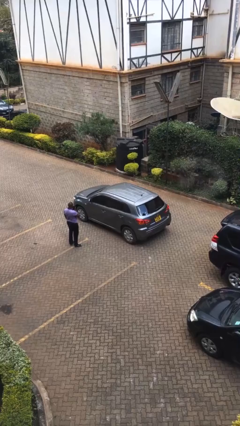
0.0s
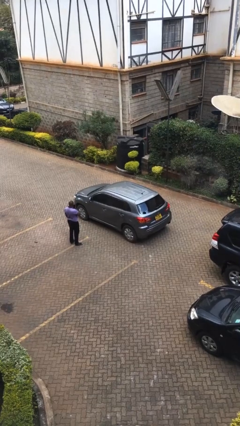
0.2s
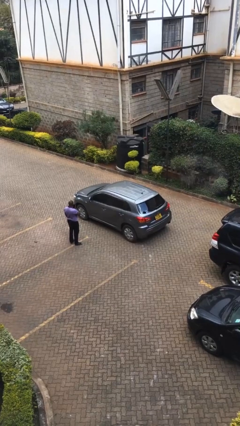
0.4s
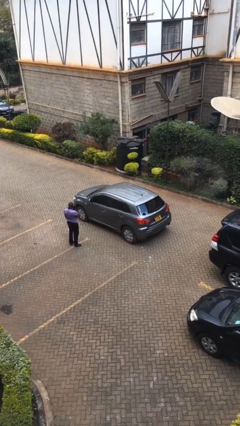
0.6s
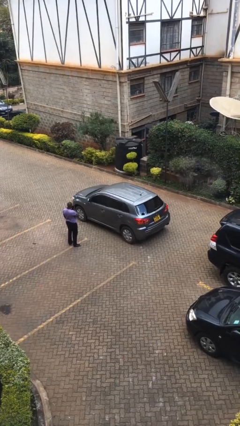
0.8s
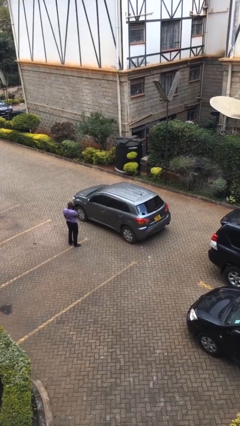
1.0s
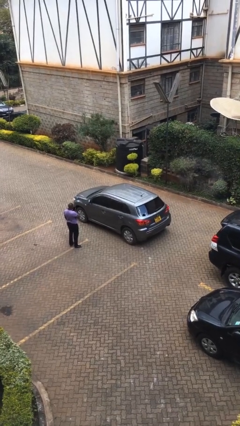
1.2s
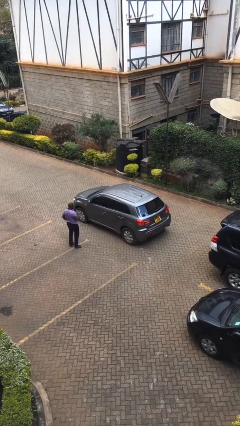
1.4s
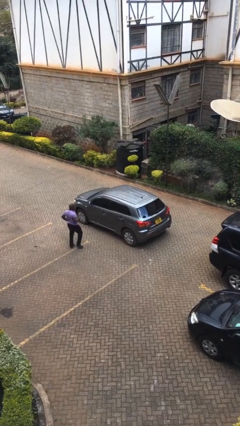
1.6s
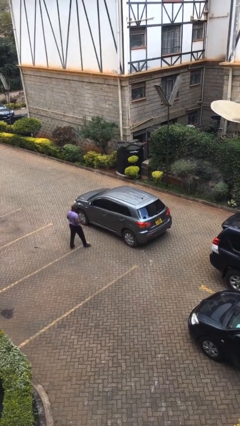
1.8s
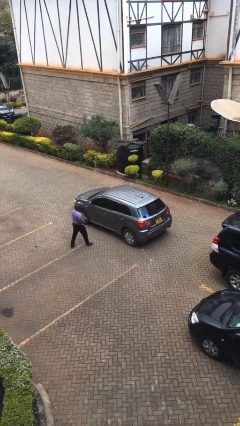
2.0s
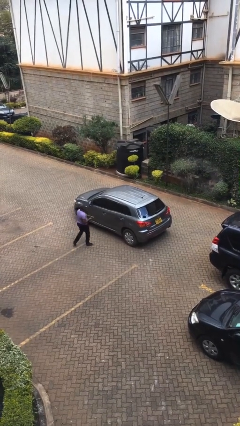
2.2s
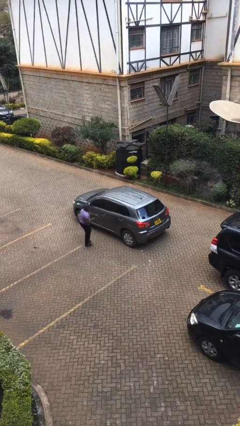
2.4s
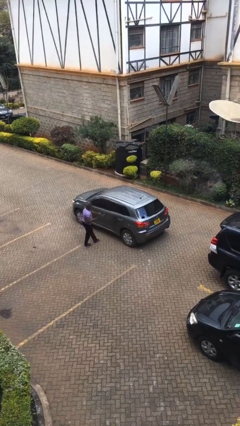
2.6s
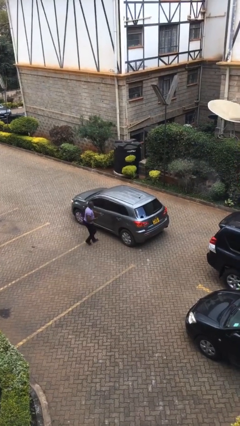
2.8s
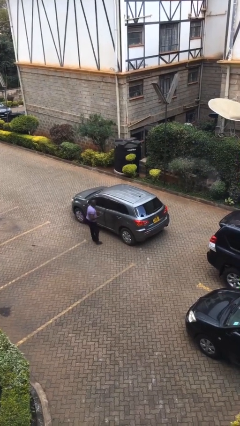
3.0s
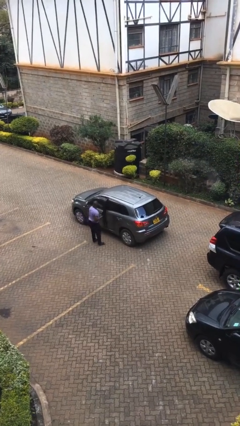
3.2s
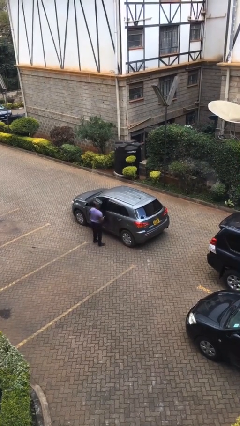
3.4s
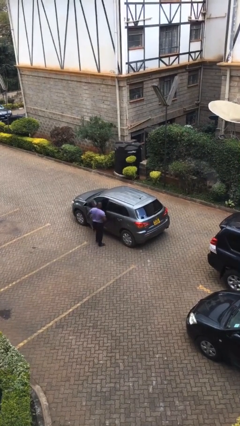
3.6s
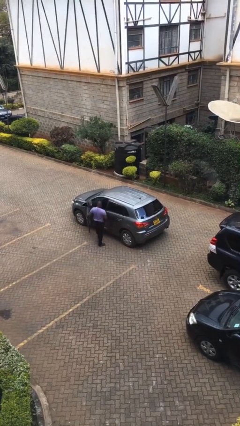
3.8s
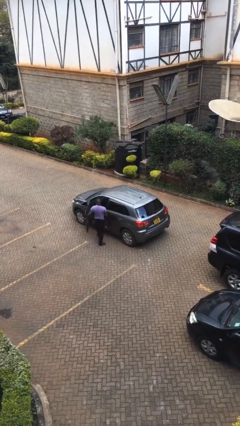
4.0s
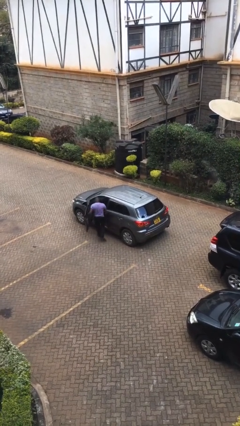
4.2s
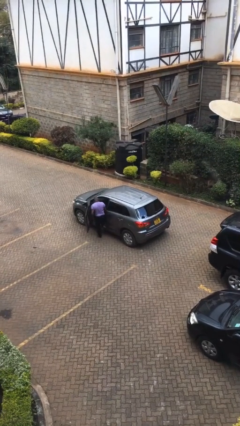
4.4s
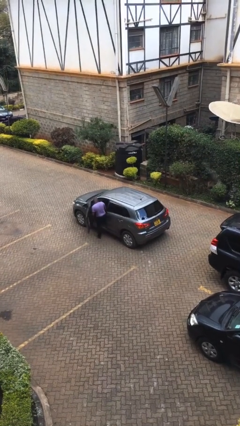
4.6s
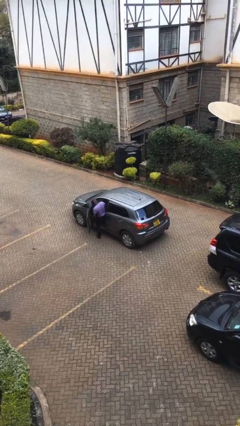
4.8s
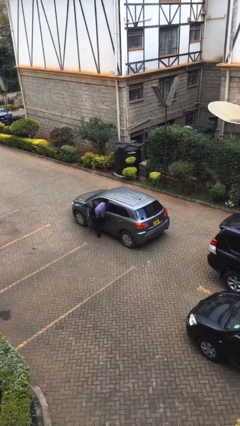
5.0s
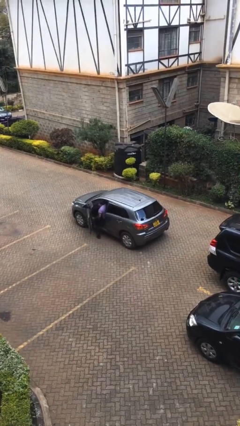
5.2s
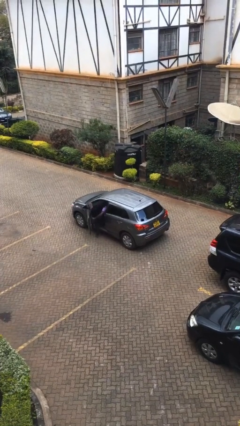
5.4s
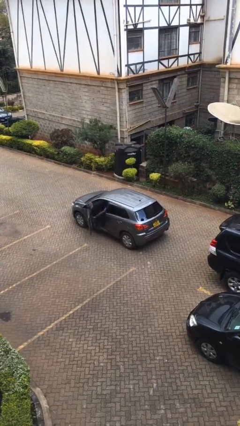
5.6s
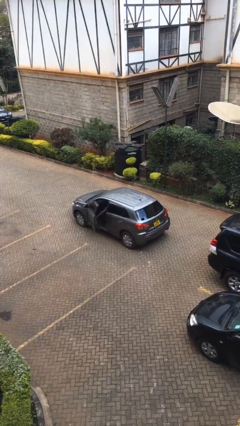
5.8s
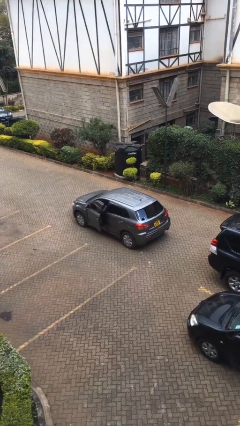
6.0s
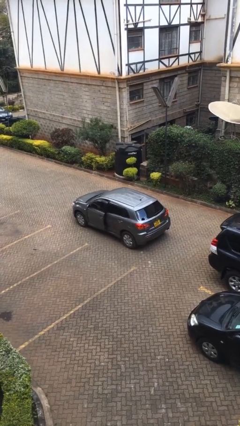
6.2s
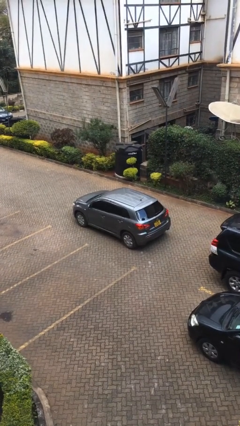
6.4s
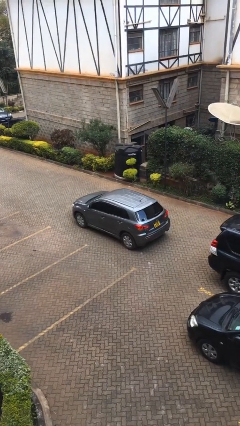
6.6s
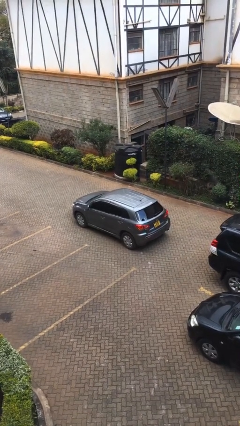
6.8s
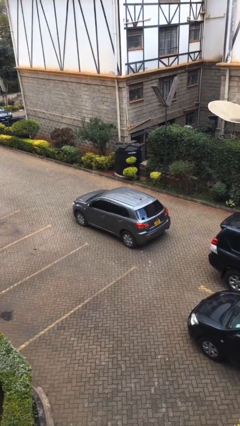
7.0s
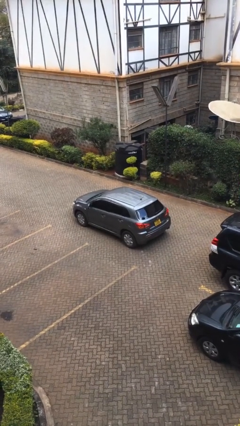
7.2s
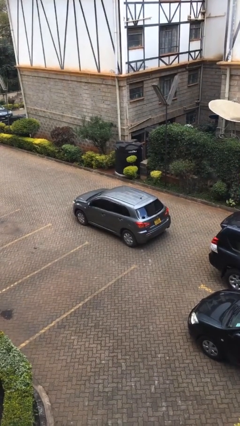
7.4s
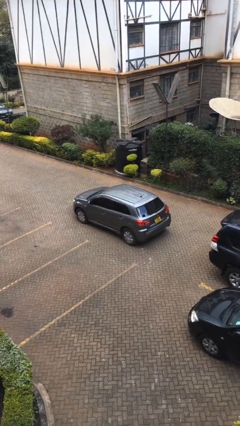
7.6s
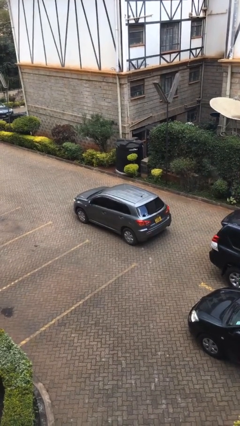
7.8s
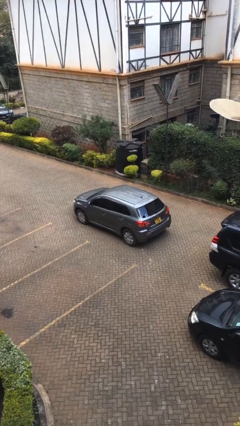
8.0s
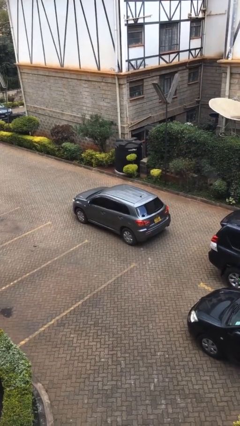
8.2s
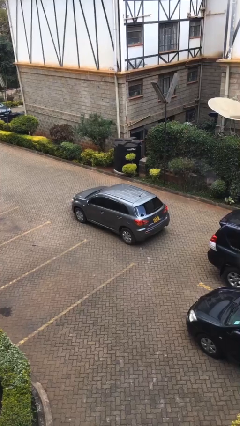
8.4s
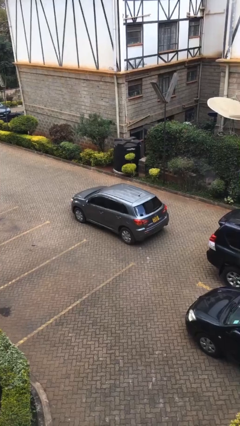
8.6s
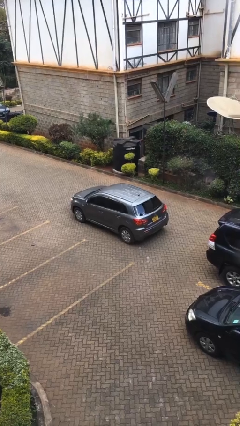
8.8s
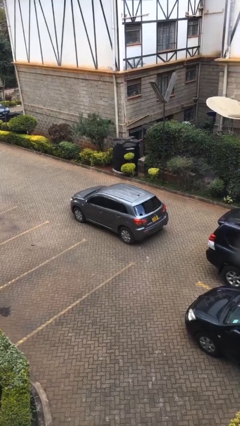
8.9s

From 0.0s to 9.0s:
car picks up person

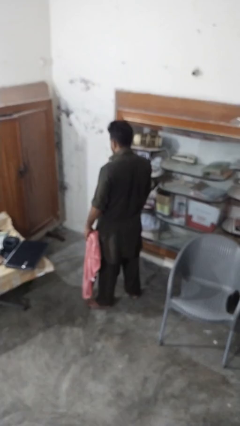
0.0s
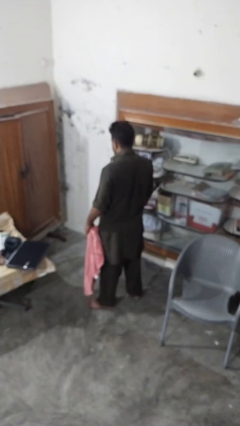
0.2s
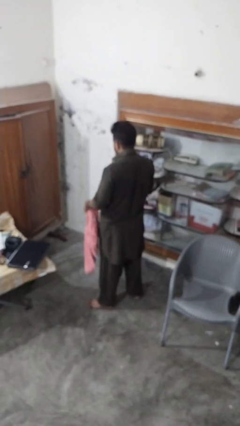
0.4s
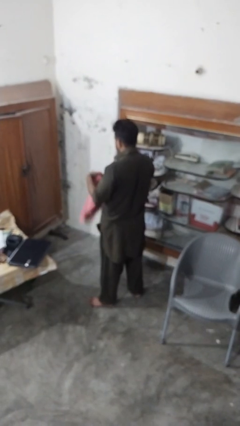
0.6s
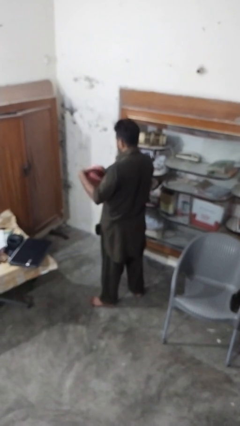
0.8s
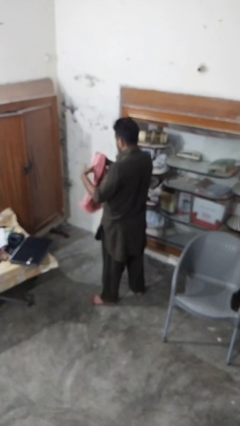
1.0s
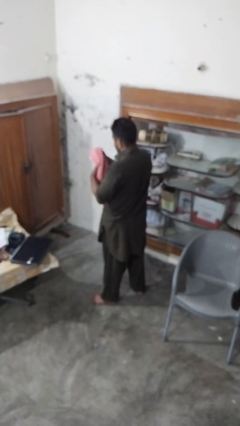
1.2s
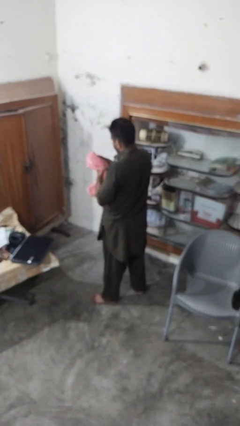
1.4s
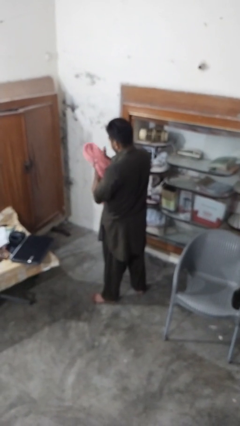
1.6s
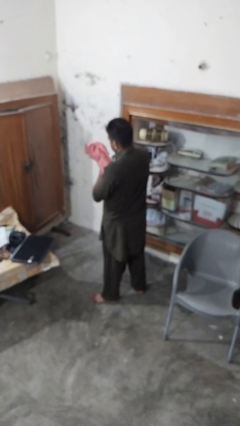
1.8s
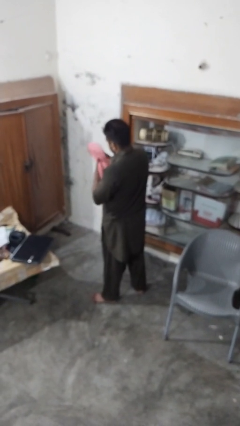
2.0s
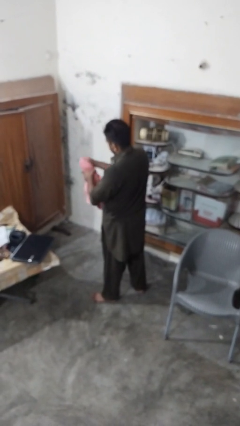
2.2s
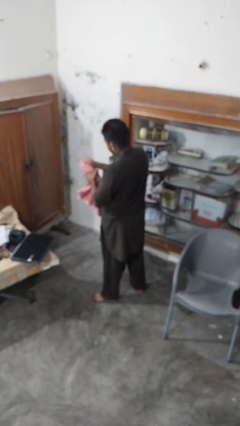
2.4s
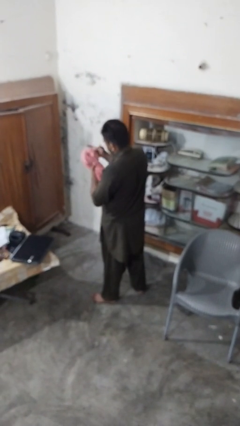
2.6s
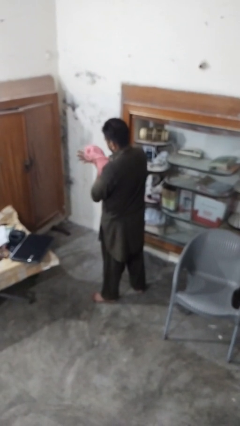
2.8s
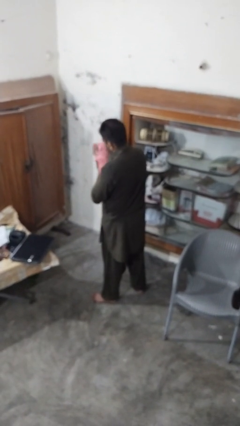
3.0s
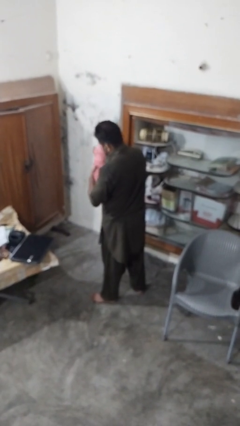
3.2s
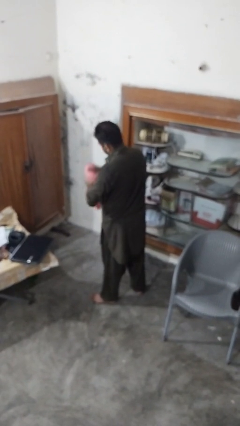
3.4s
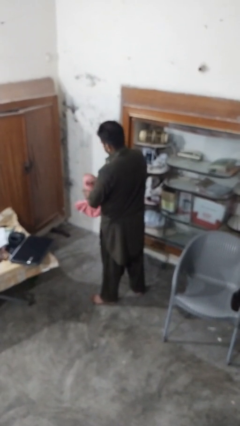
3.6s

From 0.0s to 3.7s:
person squeezes object

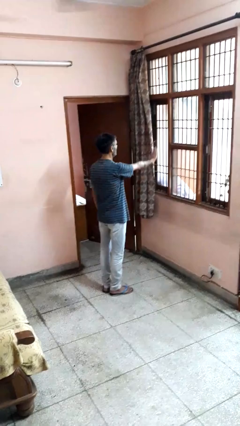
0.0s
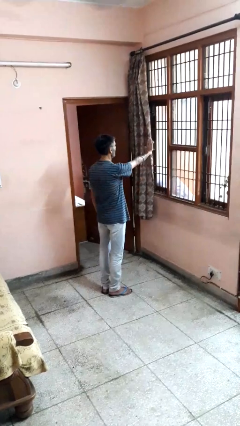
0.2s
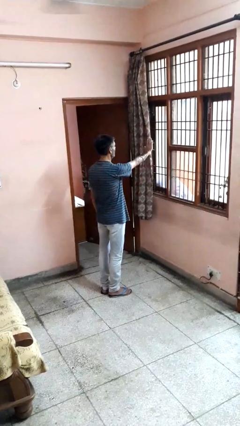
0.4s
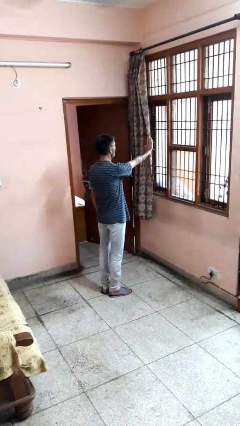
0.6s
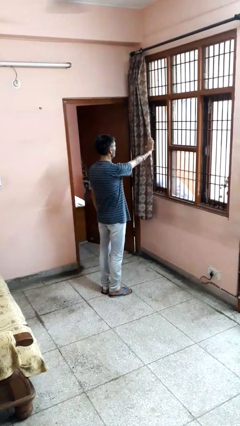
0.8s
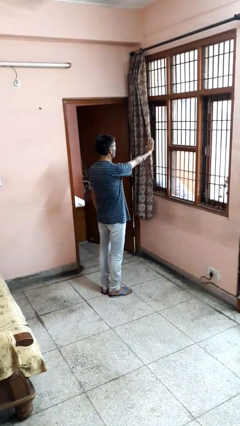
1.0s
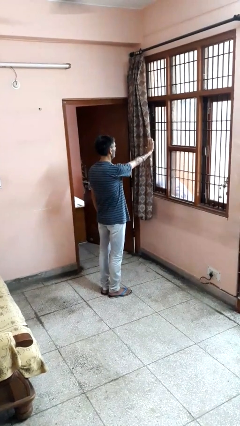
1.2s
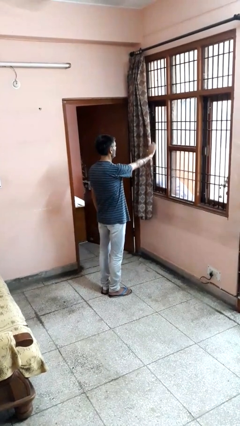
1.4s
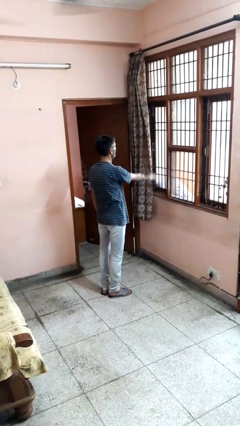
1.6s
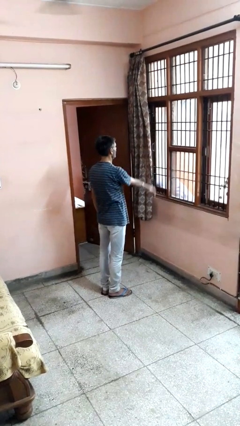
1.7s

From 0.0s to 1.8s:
person gestures stop

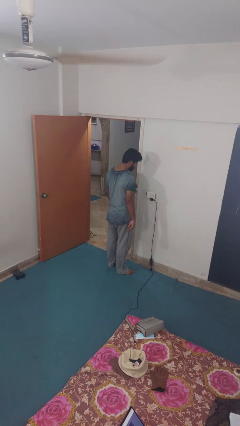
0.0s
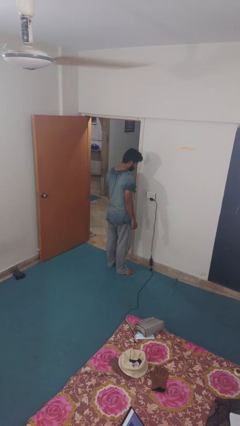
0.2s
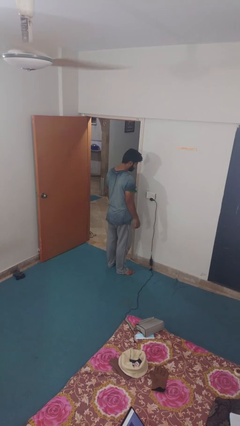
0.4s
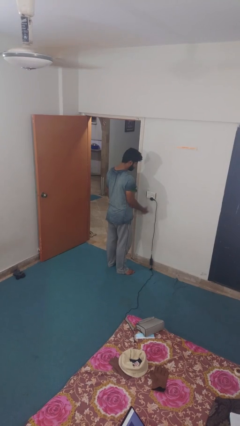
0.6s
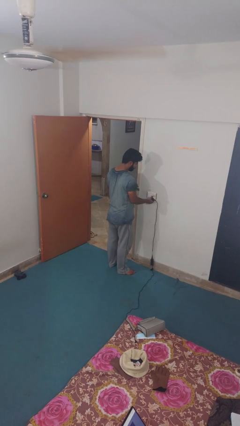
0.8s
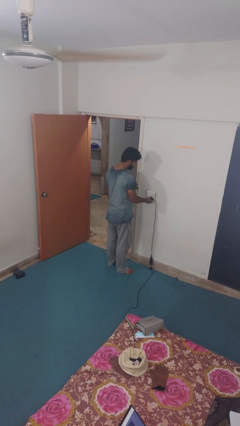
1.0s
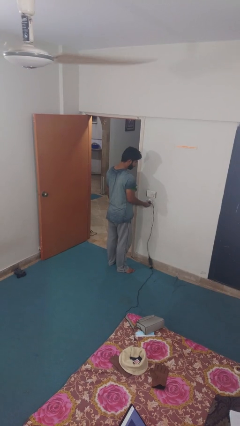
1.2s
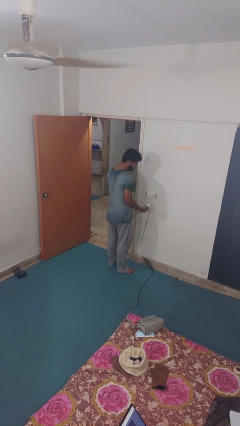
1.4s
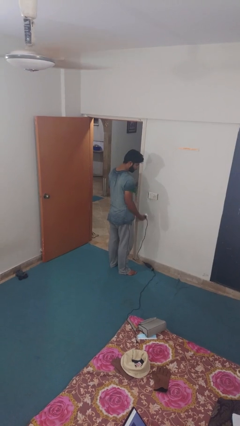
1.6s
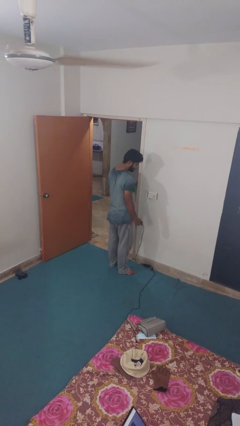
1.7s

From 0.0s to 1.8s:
person unplugs from electrical socket

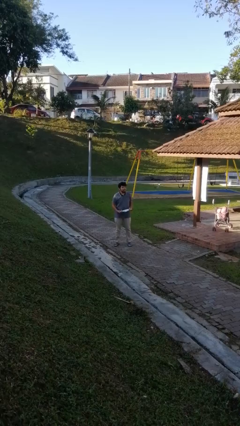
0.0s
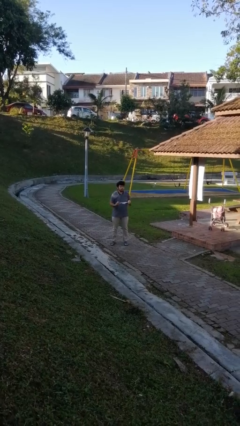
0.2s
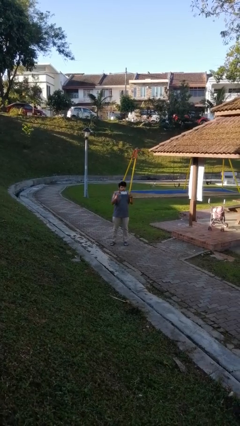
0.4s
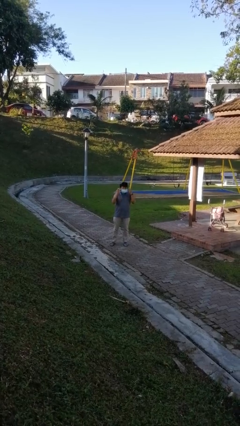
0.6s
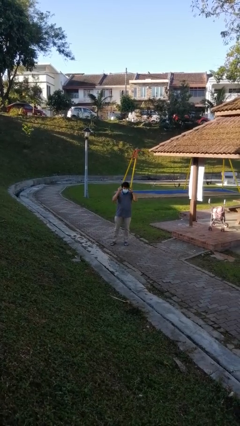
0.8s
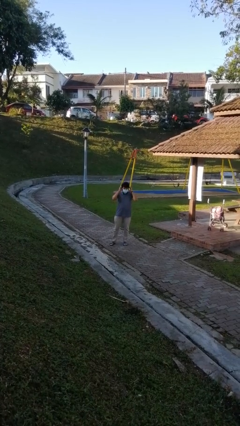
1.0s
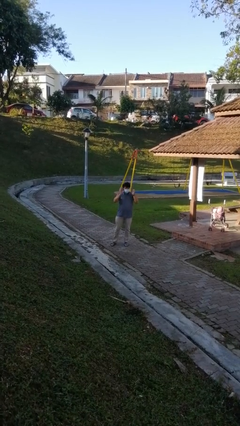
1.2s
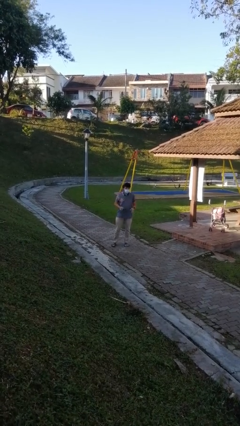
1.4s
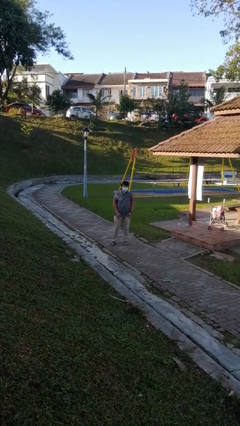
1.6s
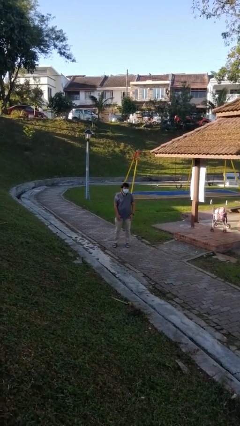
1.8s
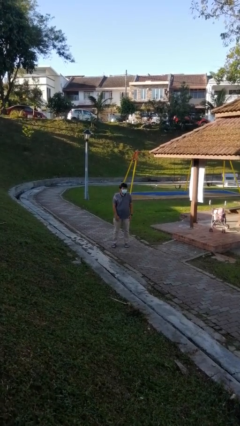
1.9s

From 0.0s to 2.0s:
person puts on facemask
